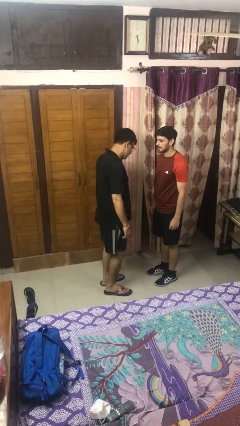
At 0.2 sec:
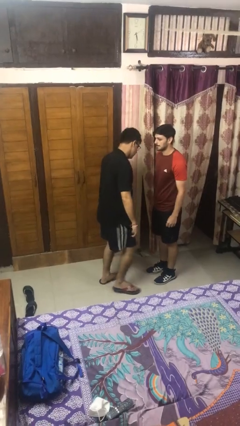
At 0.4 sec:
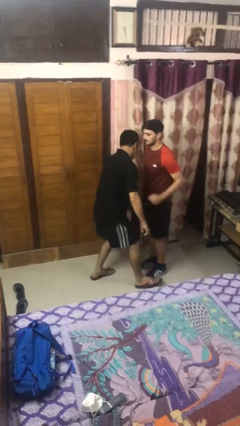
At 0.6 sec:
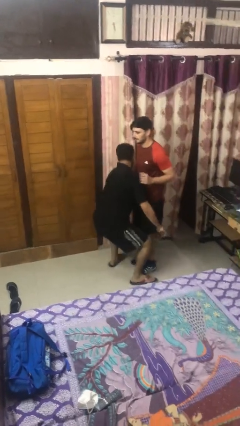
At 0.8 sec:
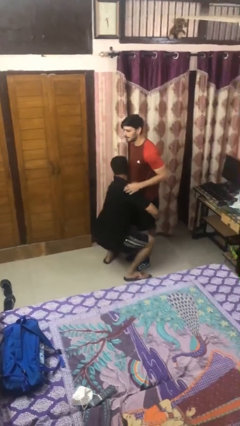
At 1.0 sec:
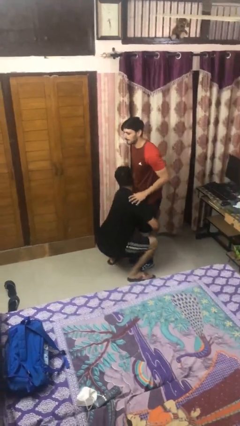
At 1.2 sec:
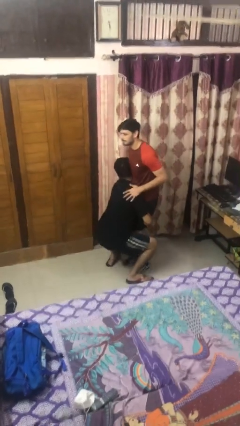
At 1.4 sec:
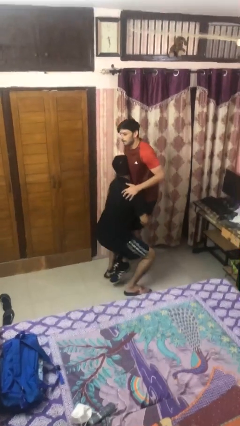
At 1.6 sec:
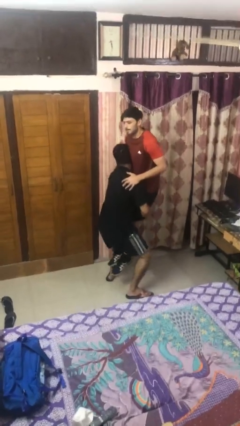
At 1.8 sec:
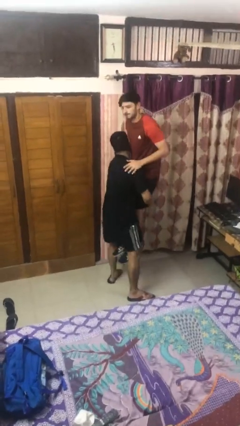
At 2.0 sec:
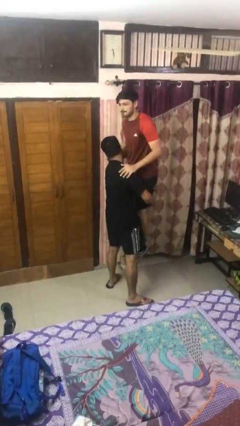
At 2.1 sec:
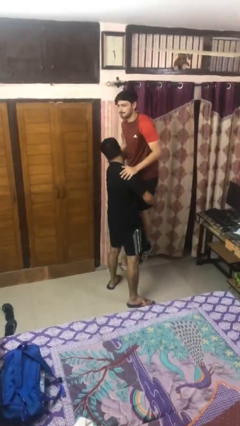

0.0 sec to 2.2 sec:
person picks up person

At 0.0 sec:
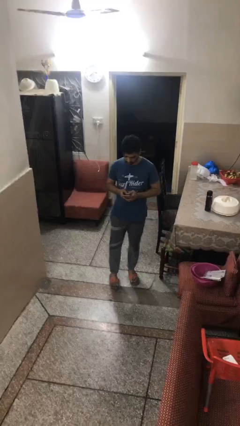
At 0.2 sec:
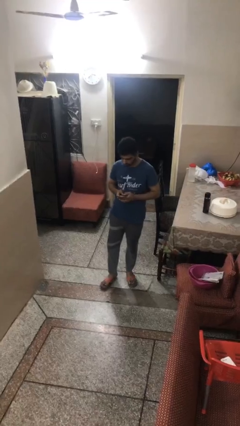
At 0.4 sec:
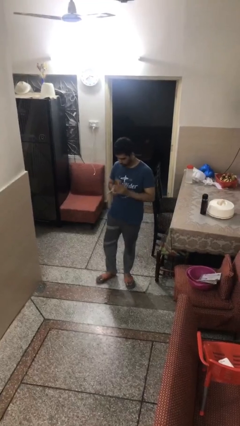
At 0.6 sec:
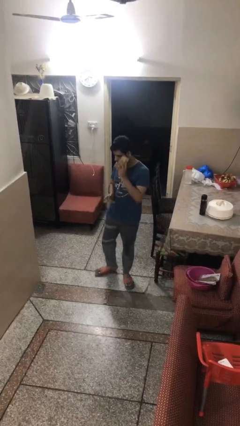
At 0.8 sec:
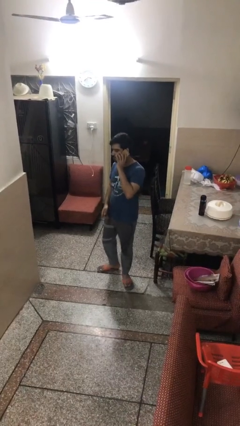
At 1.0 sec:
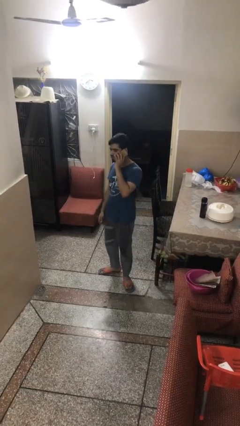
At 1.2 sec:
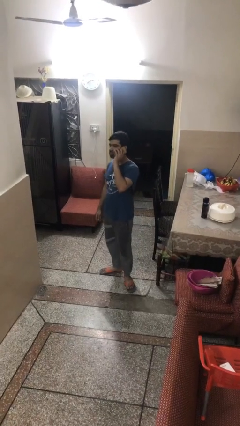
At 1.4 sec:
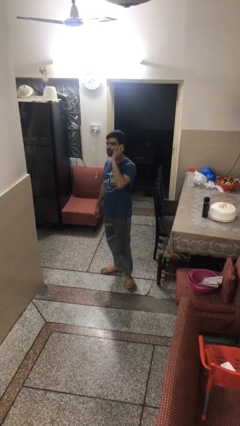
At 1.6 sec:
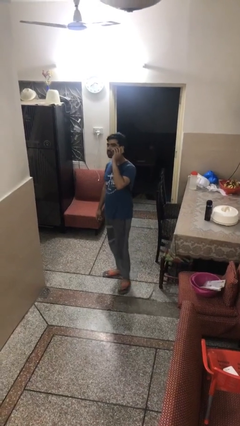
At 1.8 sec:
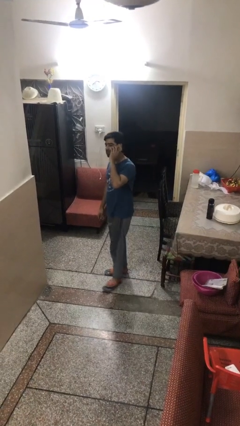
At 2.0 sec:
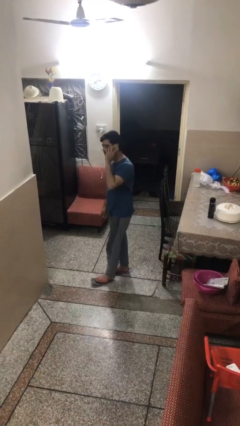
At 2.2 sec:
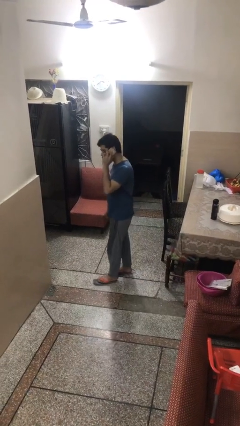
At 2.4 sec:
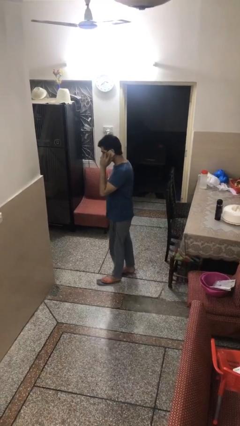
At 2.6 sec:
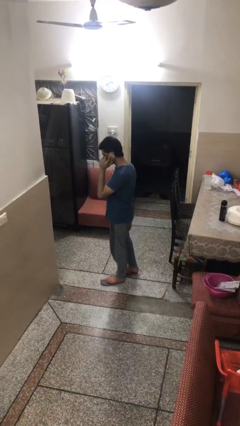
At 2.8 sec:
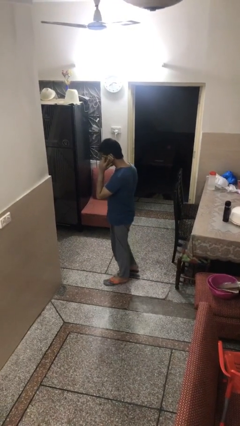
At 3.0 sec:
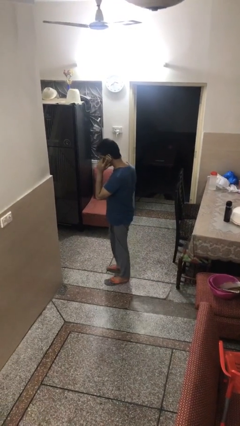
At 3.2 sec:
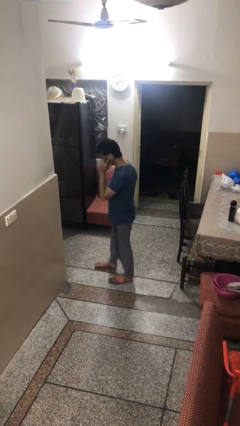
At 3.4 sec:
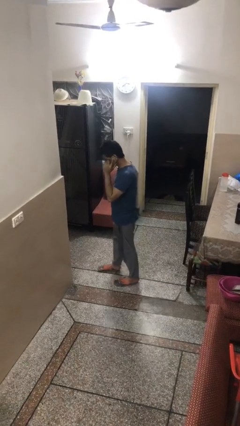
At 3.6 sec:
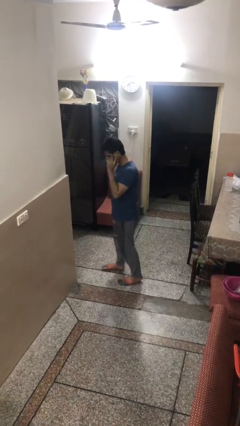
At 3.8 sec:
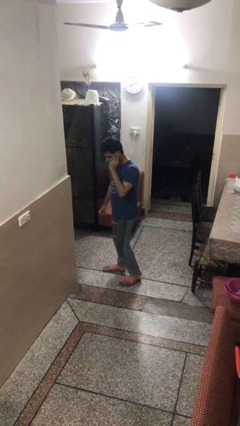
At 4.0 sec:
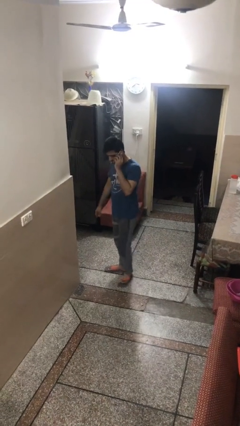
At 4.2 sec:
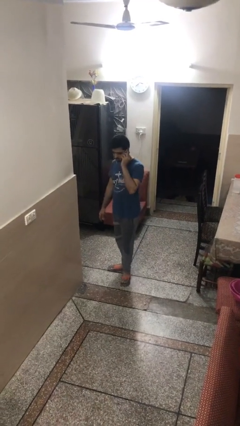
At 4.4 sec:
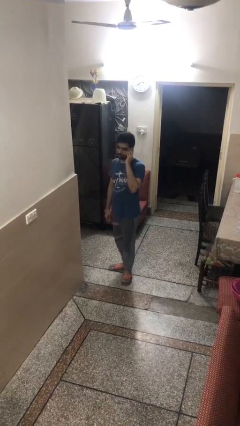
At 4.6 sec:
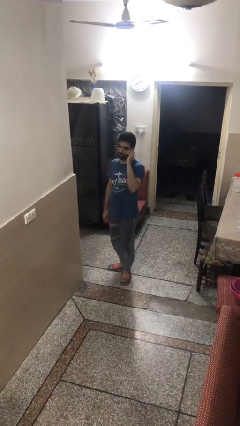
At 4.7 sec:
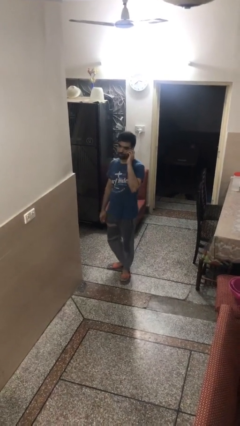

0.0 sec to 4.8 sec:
person talks on phone

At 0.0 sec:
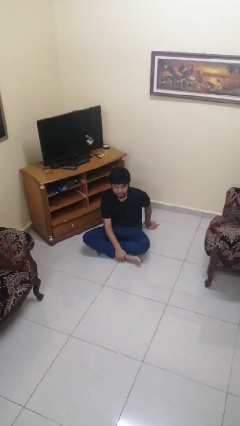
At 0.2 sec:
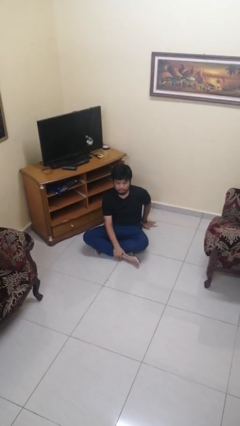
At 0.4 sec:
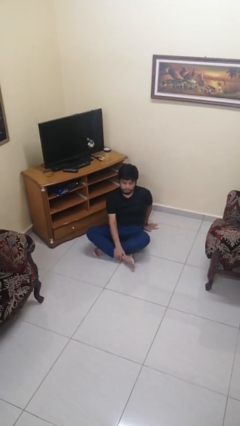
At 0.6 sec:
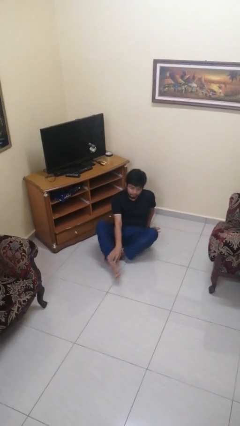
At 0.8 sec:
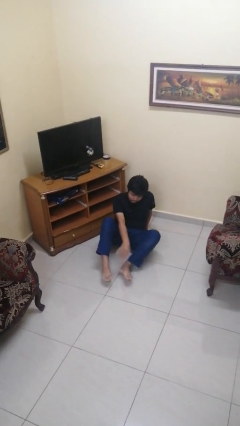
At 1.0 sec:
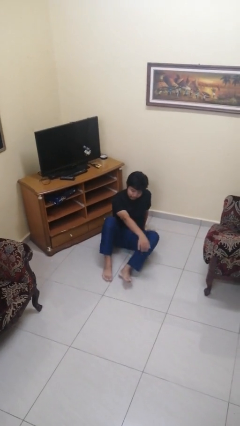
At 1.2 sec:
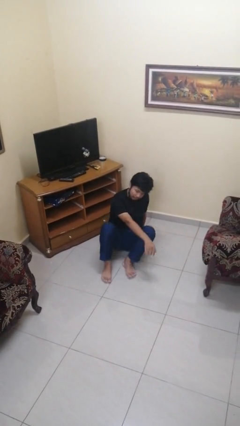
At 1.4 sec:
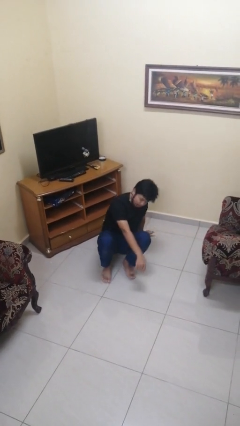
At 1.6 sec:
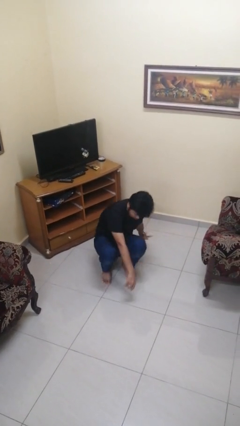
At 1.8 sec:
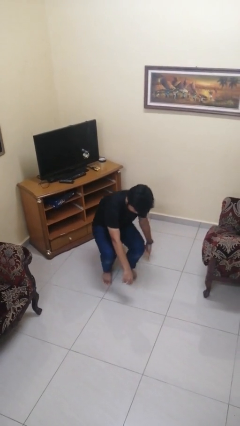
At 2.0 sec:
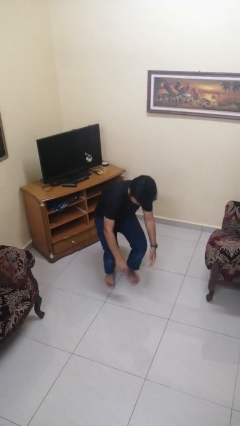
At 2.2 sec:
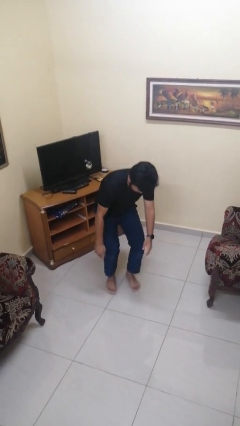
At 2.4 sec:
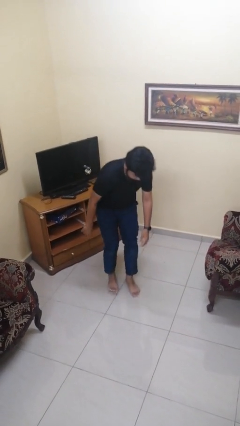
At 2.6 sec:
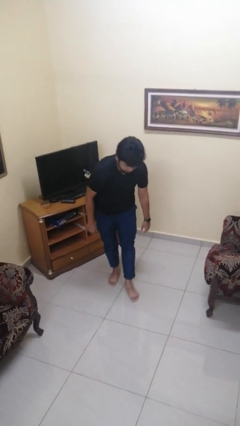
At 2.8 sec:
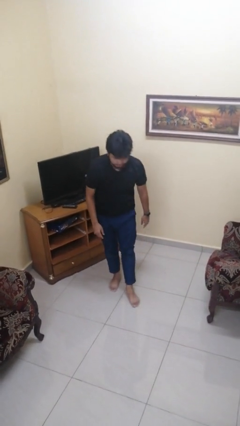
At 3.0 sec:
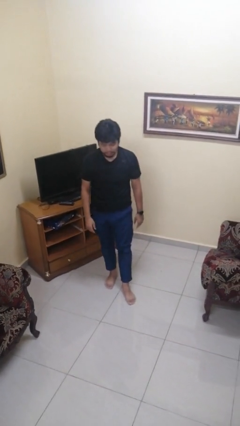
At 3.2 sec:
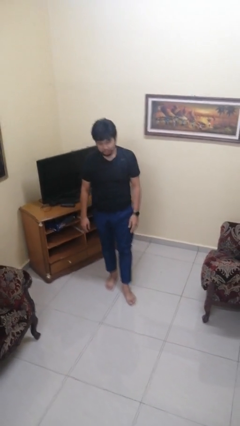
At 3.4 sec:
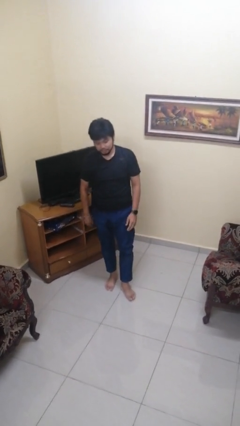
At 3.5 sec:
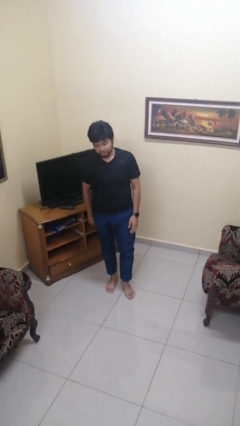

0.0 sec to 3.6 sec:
person stands up from floor

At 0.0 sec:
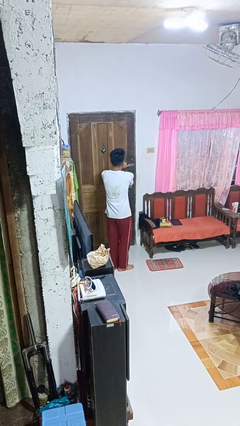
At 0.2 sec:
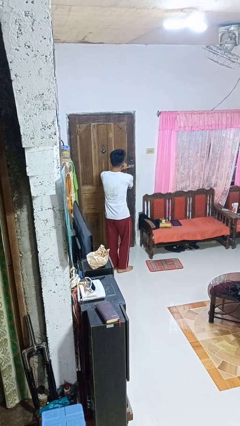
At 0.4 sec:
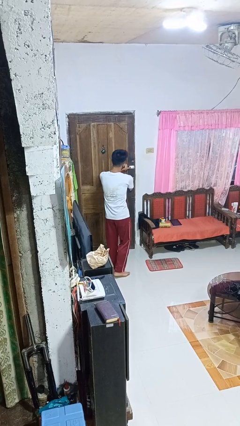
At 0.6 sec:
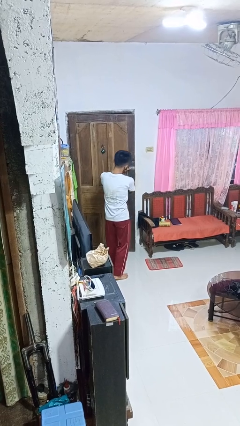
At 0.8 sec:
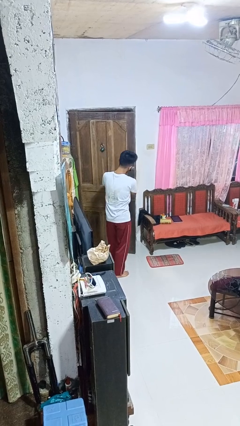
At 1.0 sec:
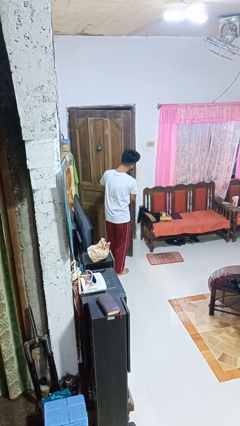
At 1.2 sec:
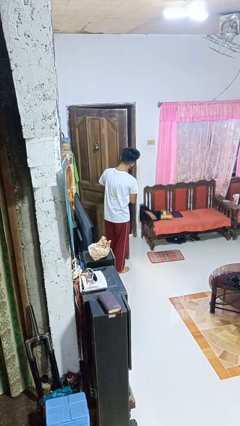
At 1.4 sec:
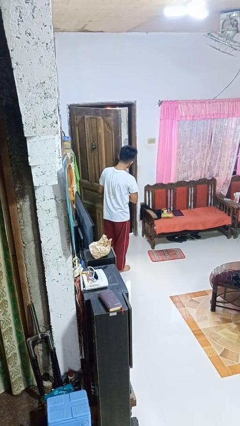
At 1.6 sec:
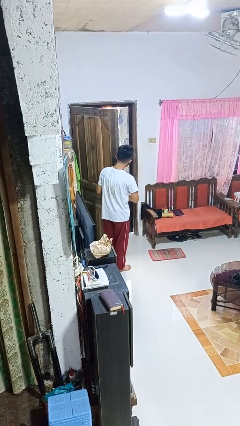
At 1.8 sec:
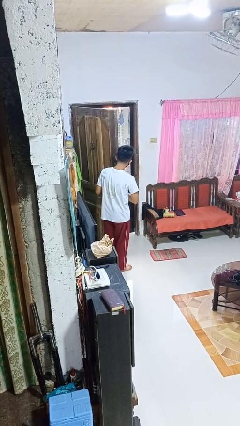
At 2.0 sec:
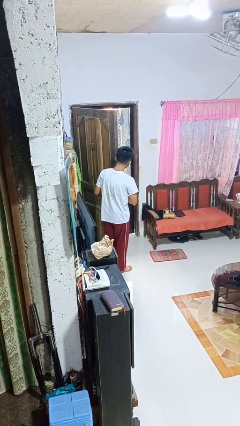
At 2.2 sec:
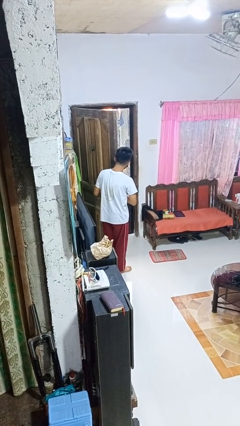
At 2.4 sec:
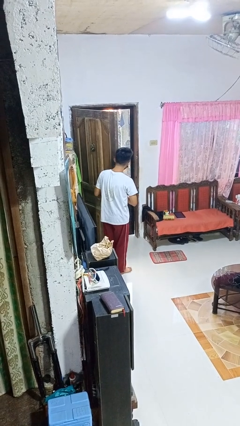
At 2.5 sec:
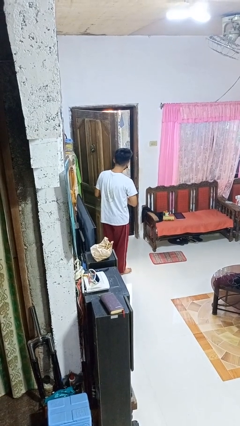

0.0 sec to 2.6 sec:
person opens facility door

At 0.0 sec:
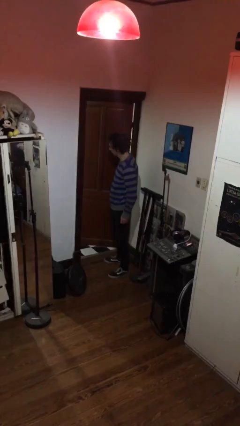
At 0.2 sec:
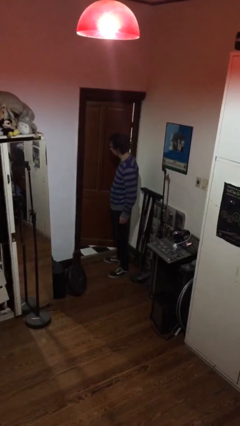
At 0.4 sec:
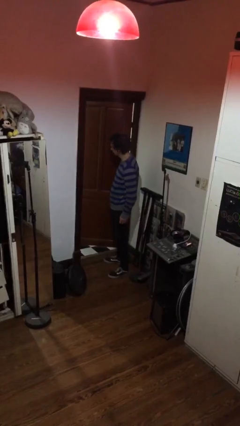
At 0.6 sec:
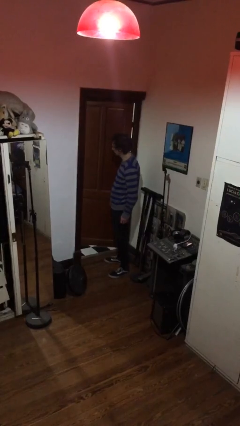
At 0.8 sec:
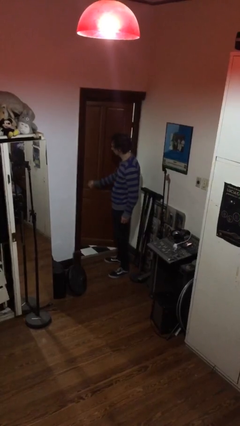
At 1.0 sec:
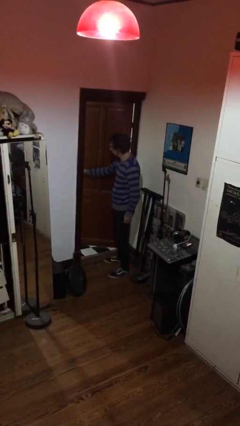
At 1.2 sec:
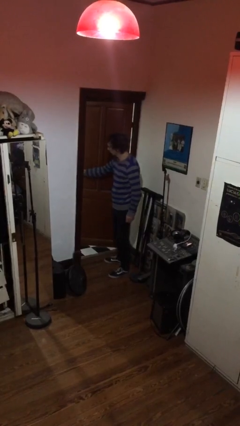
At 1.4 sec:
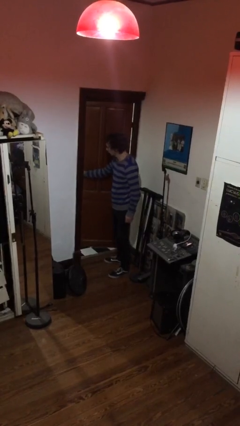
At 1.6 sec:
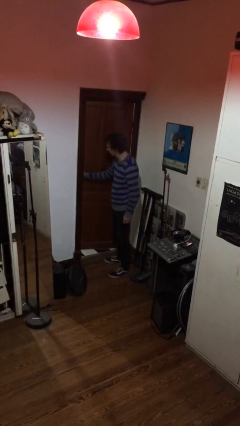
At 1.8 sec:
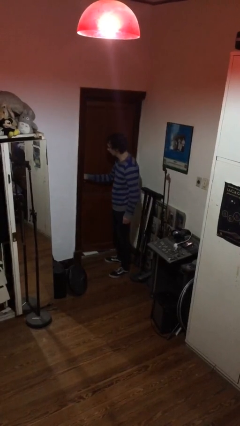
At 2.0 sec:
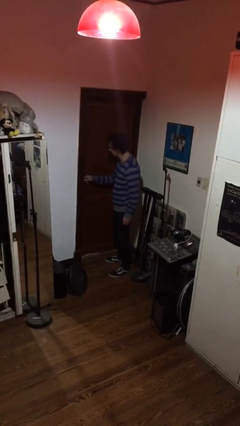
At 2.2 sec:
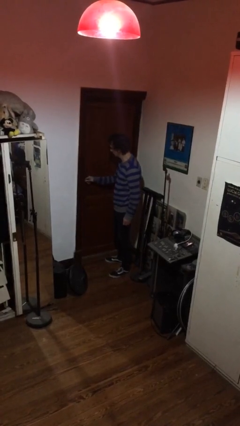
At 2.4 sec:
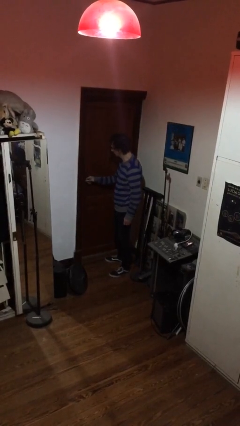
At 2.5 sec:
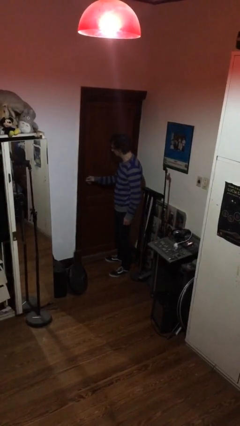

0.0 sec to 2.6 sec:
person closes facility door

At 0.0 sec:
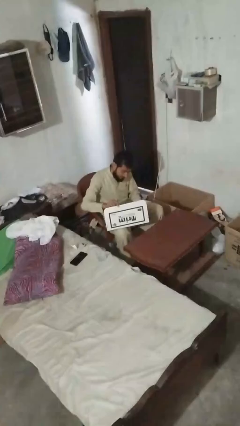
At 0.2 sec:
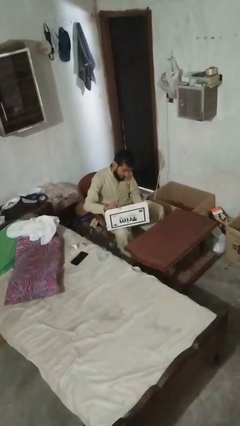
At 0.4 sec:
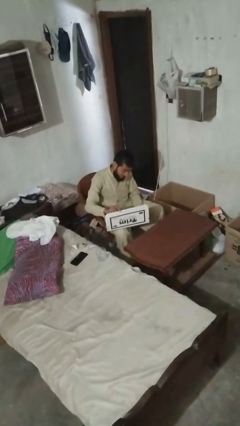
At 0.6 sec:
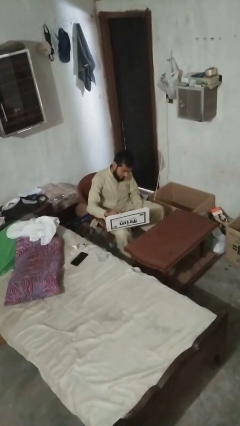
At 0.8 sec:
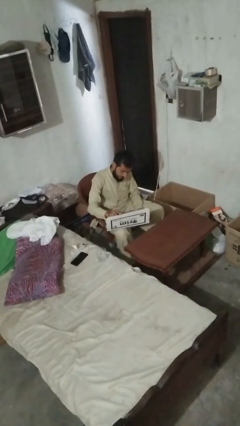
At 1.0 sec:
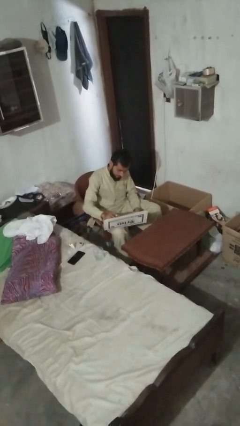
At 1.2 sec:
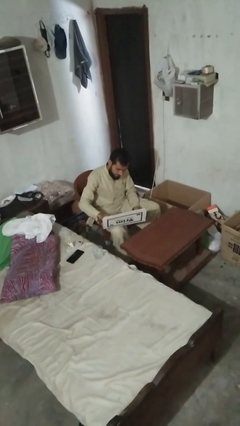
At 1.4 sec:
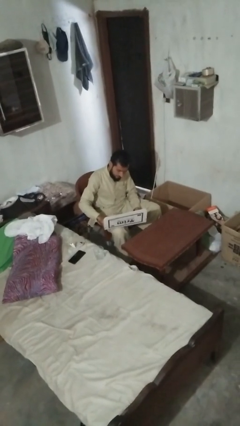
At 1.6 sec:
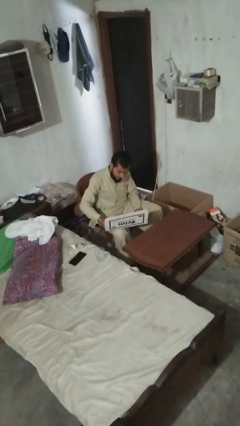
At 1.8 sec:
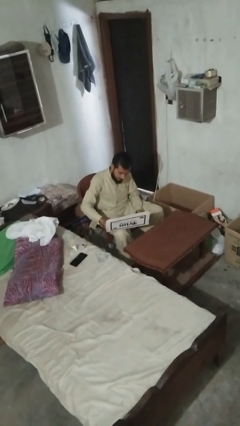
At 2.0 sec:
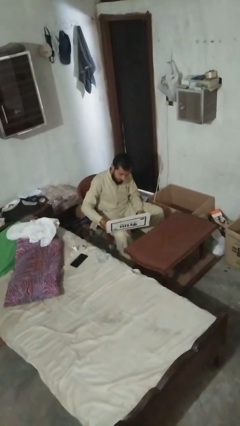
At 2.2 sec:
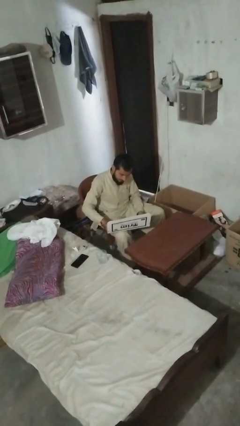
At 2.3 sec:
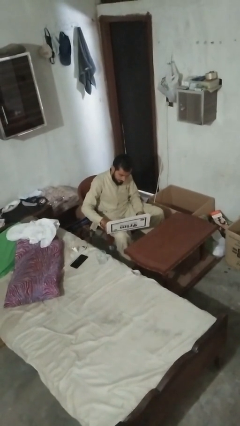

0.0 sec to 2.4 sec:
person opens laptop
